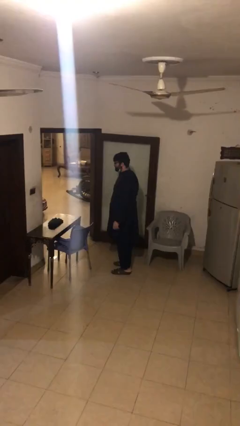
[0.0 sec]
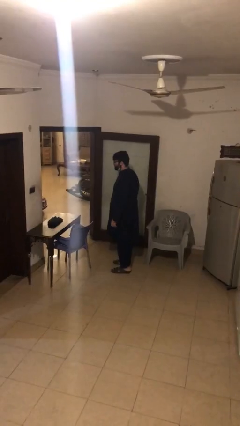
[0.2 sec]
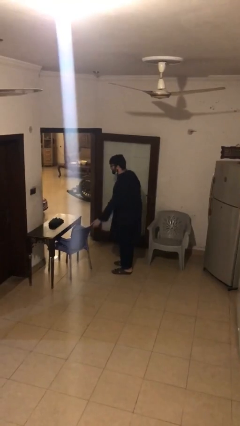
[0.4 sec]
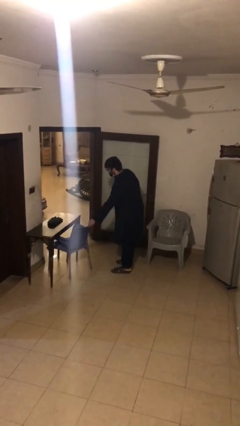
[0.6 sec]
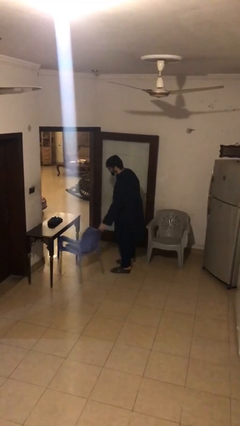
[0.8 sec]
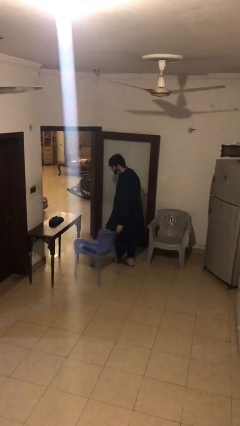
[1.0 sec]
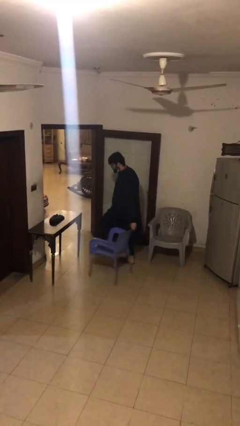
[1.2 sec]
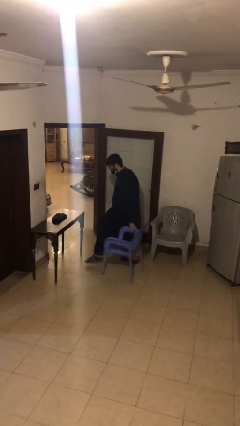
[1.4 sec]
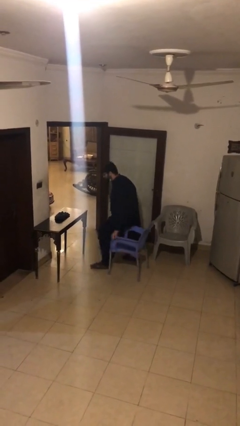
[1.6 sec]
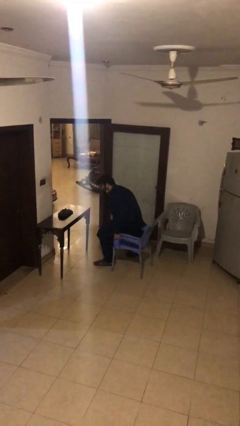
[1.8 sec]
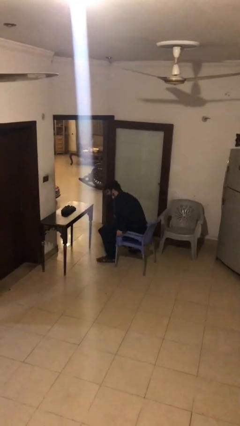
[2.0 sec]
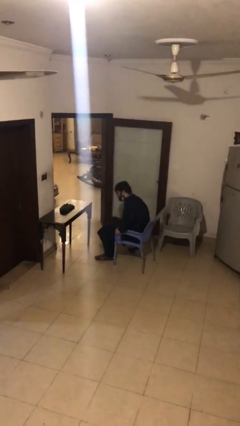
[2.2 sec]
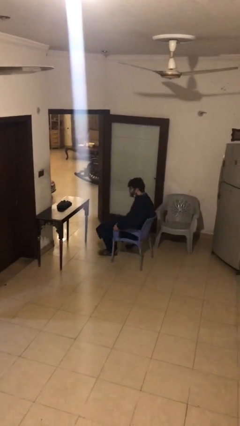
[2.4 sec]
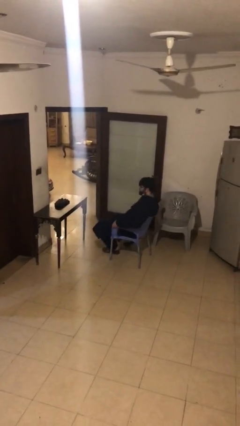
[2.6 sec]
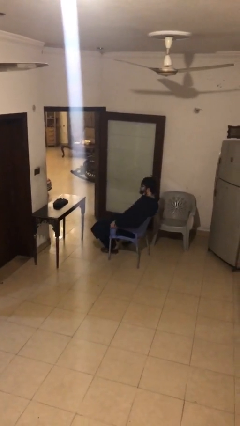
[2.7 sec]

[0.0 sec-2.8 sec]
person sits down

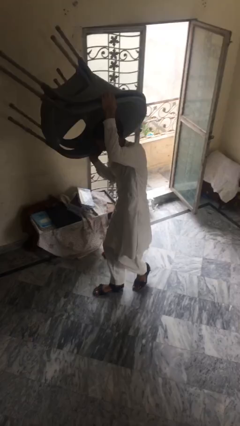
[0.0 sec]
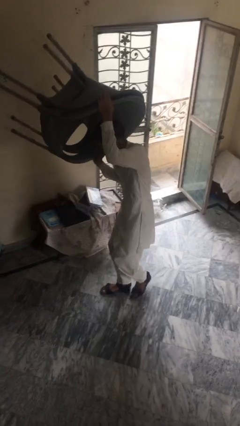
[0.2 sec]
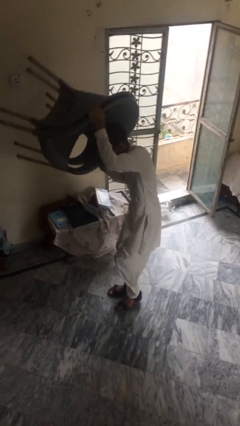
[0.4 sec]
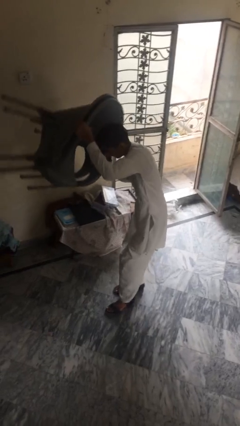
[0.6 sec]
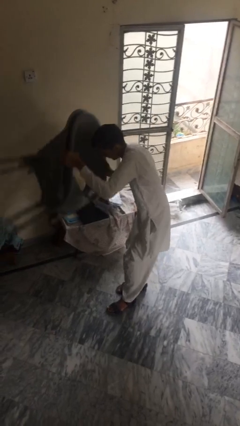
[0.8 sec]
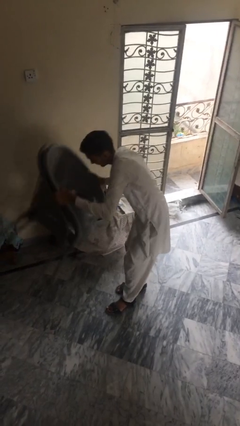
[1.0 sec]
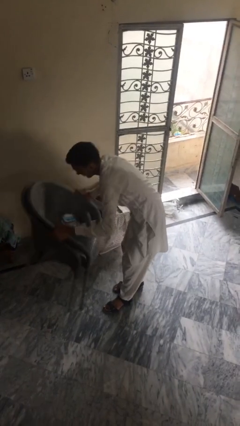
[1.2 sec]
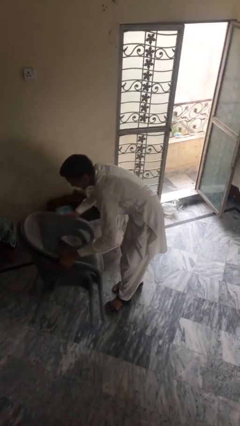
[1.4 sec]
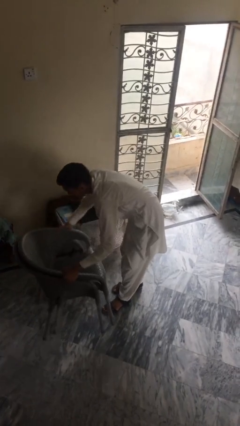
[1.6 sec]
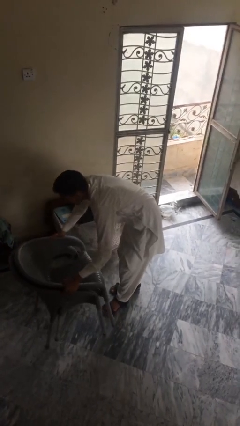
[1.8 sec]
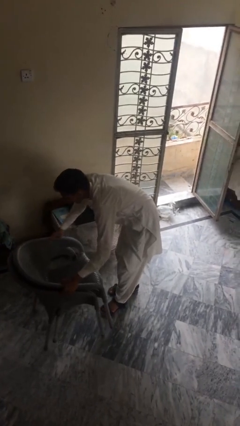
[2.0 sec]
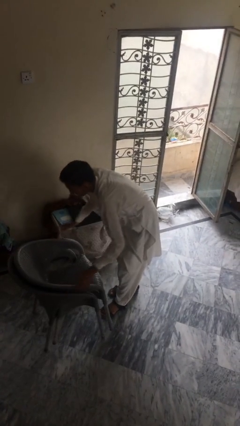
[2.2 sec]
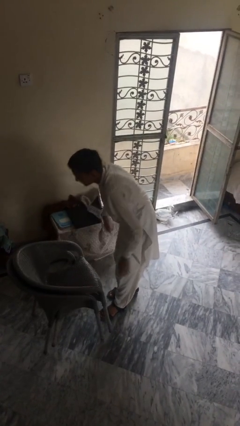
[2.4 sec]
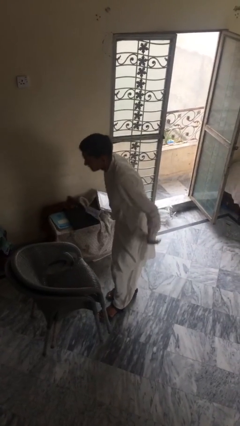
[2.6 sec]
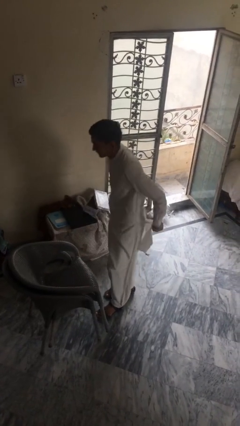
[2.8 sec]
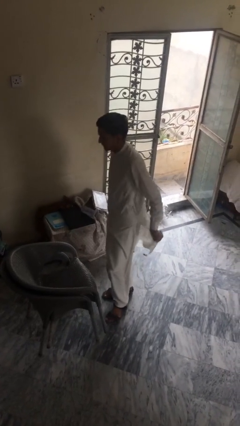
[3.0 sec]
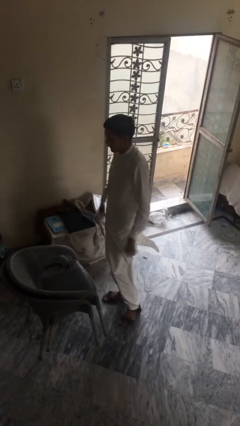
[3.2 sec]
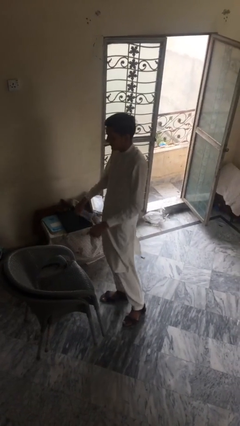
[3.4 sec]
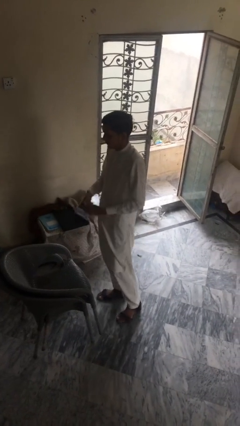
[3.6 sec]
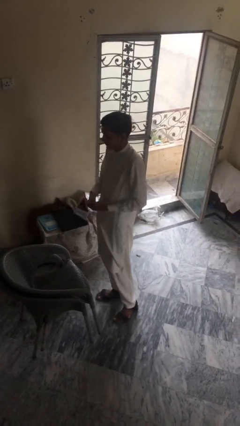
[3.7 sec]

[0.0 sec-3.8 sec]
person puts down object on floor

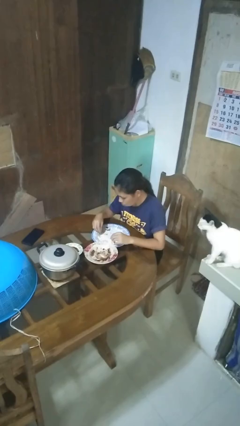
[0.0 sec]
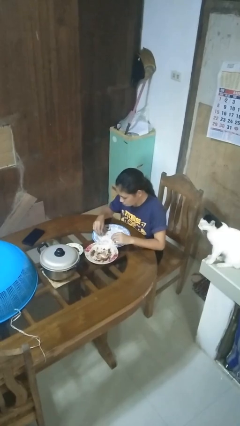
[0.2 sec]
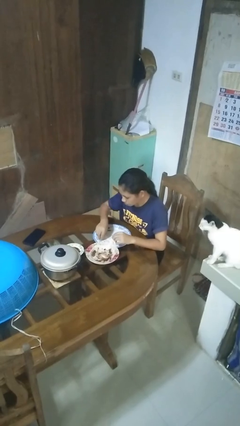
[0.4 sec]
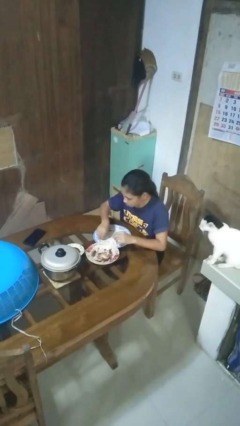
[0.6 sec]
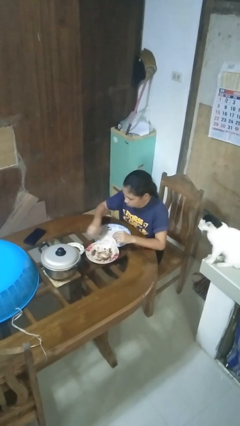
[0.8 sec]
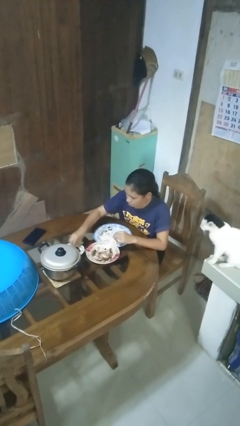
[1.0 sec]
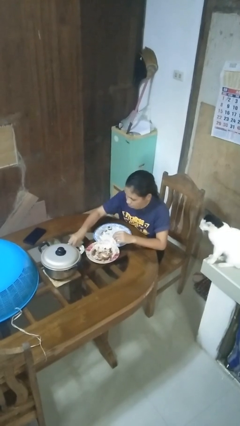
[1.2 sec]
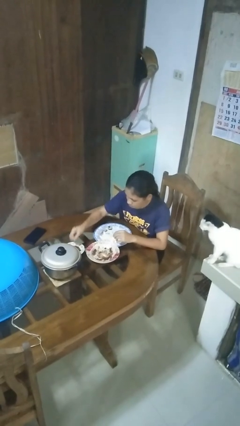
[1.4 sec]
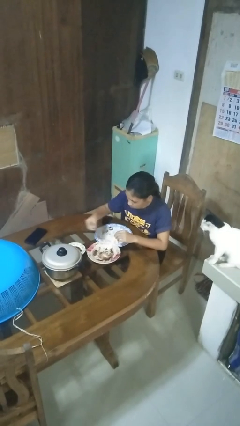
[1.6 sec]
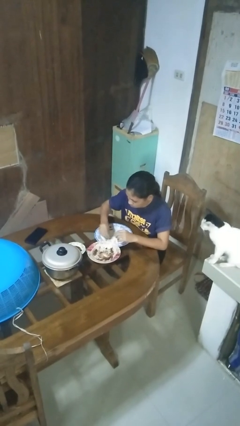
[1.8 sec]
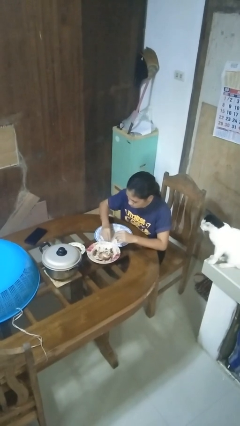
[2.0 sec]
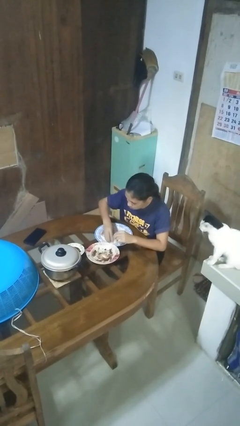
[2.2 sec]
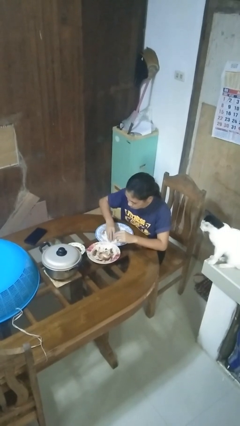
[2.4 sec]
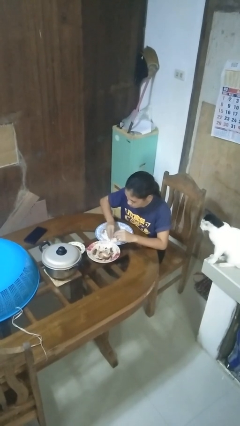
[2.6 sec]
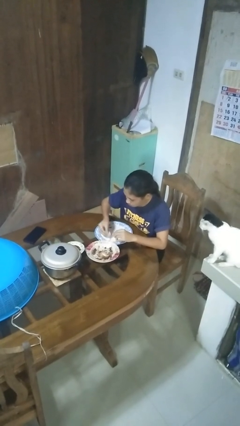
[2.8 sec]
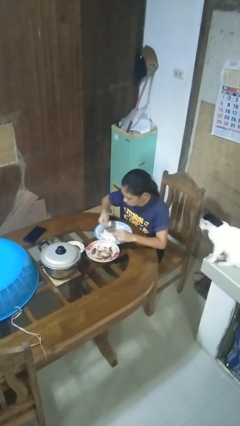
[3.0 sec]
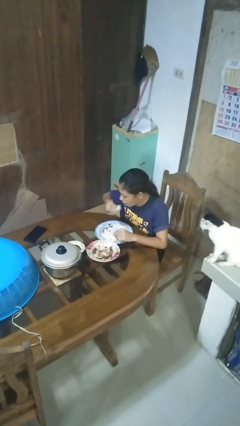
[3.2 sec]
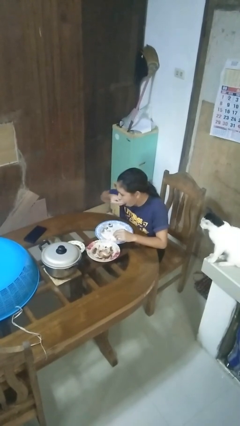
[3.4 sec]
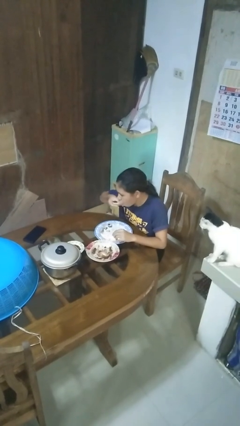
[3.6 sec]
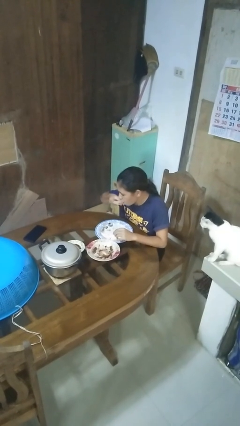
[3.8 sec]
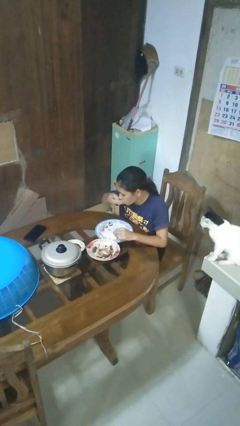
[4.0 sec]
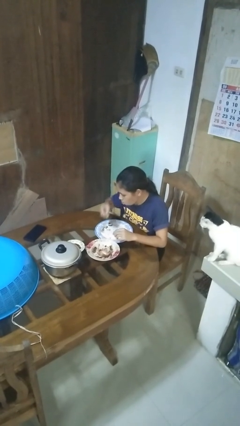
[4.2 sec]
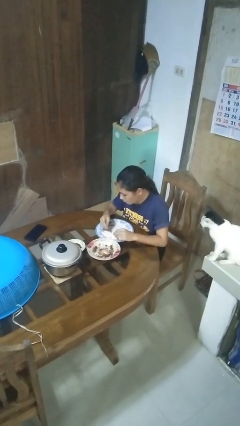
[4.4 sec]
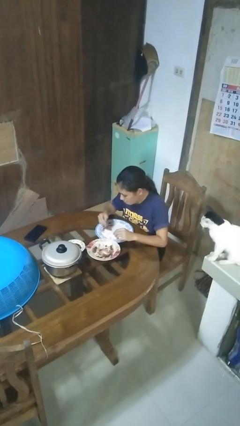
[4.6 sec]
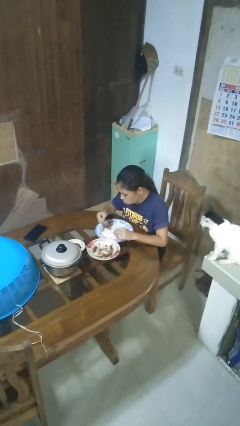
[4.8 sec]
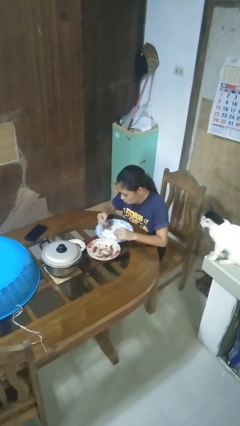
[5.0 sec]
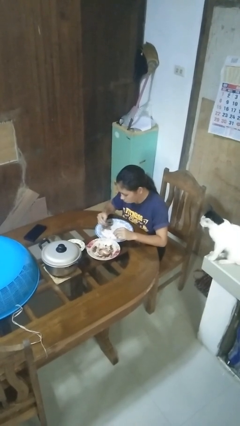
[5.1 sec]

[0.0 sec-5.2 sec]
person eats with hands

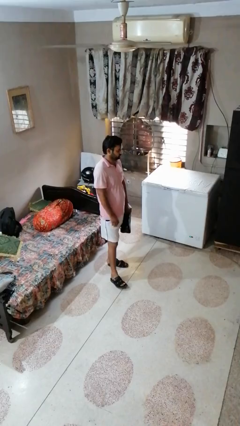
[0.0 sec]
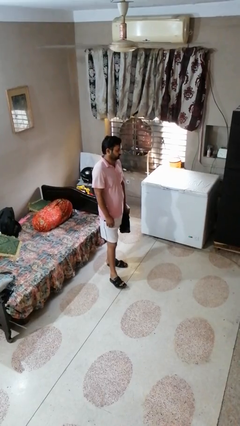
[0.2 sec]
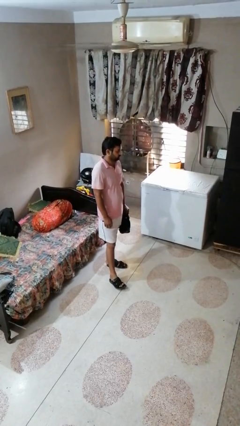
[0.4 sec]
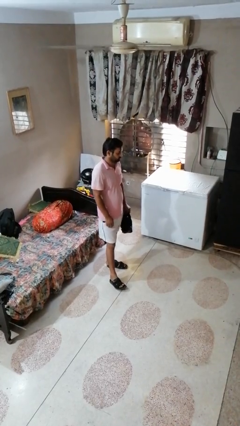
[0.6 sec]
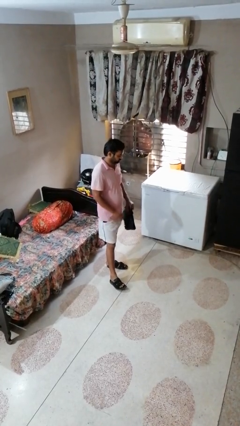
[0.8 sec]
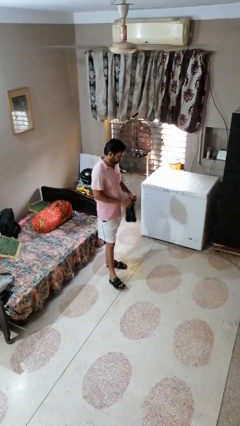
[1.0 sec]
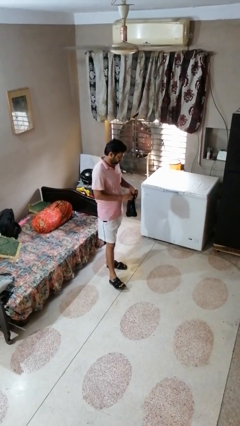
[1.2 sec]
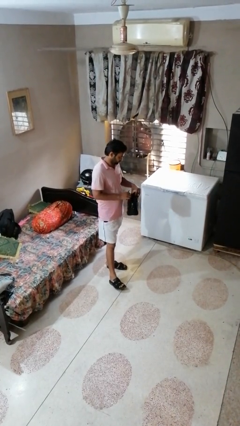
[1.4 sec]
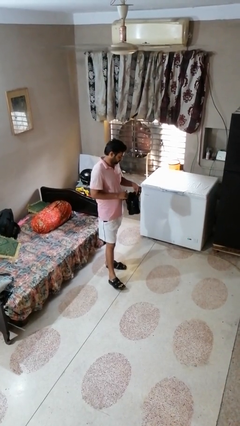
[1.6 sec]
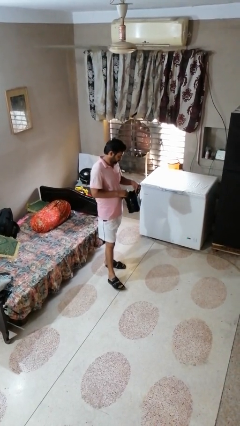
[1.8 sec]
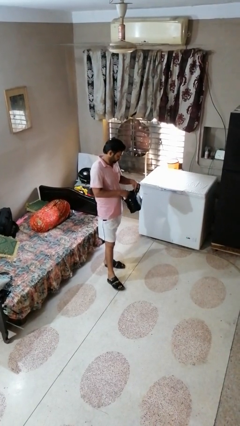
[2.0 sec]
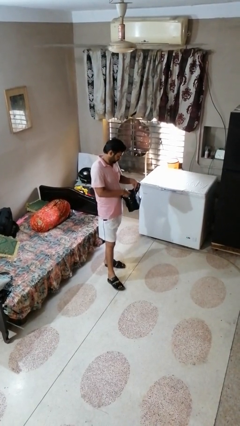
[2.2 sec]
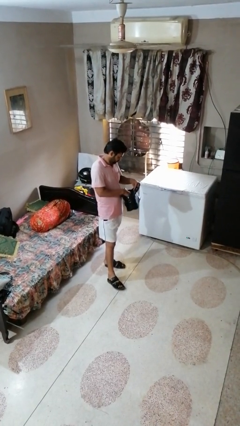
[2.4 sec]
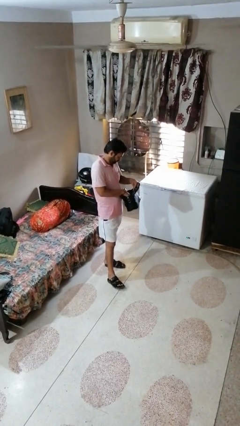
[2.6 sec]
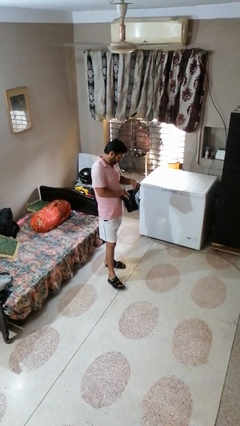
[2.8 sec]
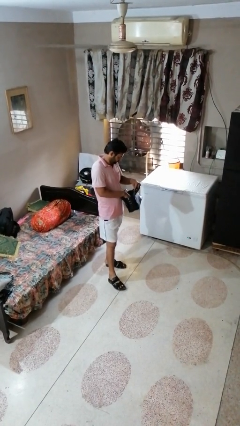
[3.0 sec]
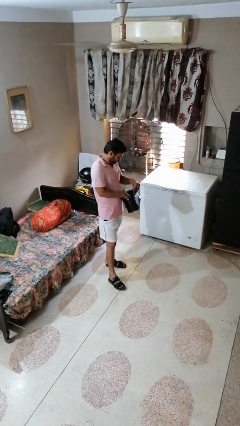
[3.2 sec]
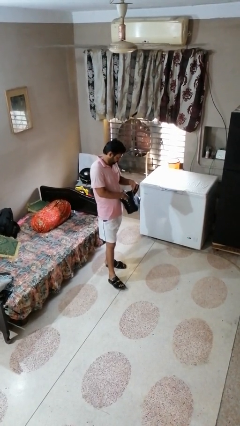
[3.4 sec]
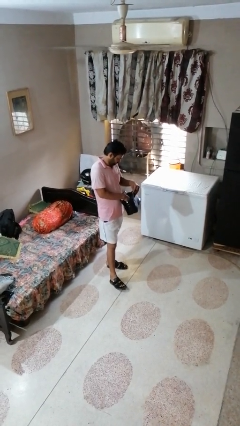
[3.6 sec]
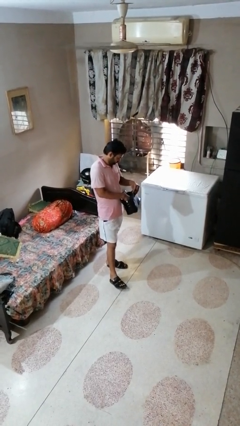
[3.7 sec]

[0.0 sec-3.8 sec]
person searches in purse

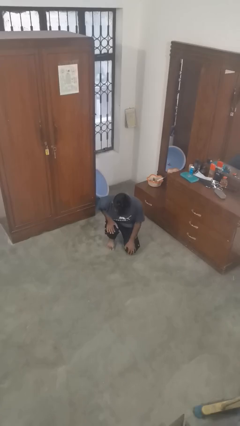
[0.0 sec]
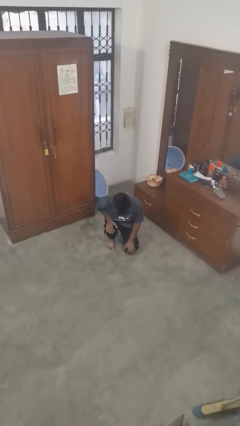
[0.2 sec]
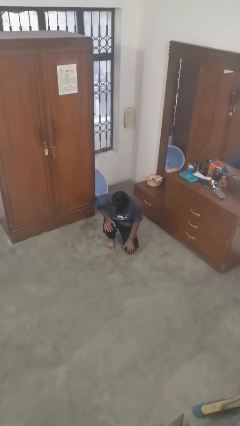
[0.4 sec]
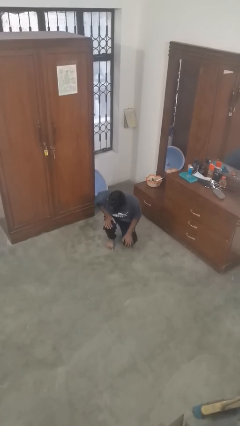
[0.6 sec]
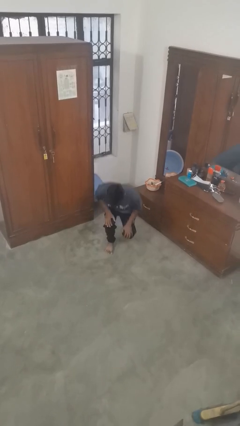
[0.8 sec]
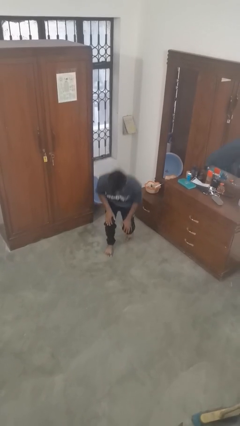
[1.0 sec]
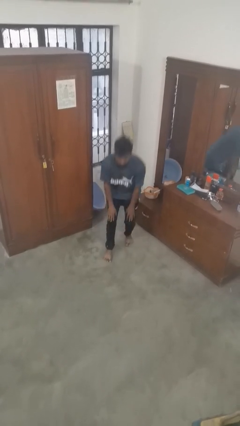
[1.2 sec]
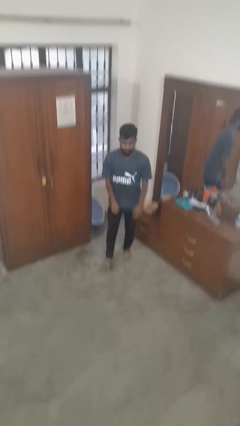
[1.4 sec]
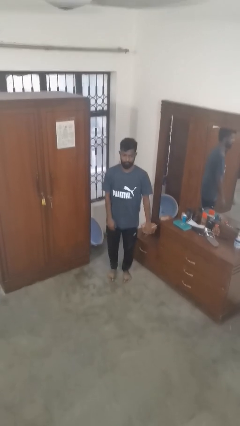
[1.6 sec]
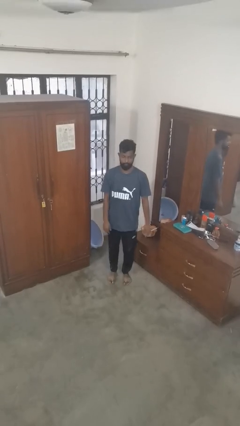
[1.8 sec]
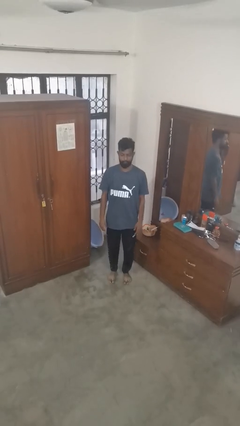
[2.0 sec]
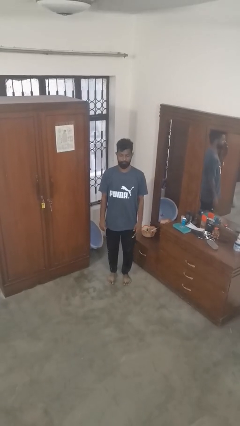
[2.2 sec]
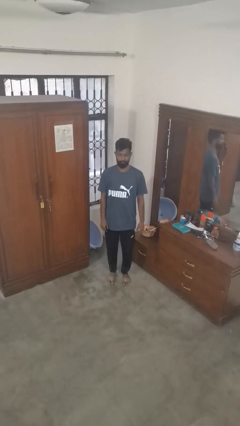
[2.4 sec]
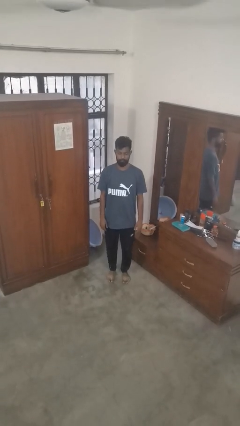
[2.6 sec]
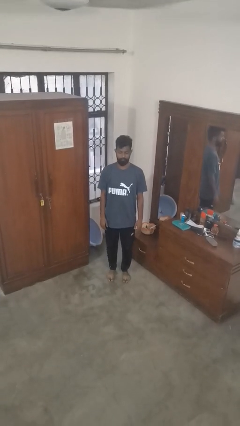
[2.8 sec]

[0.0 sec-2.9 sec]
person stands up from floor
